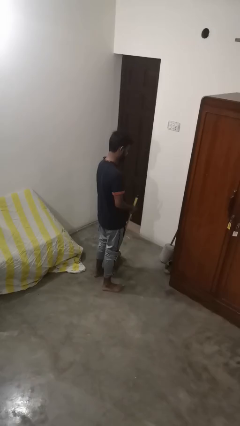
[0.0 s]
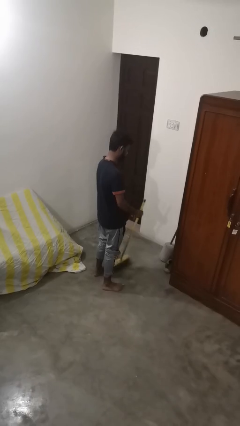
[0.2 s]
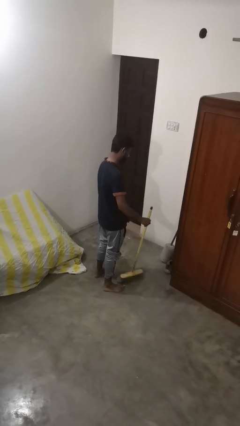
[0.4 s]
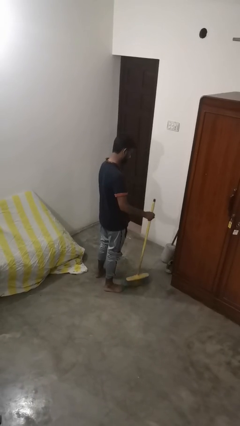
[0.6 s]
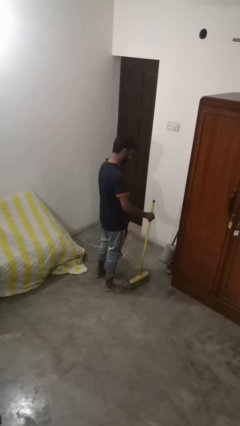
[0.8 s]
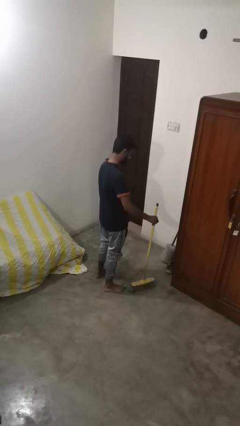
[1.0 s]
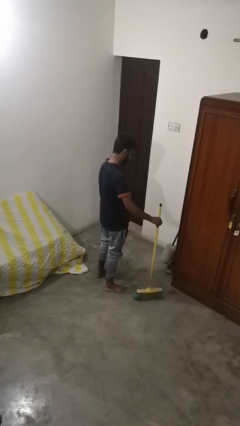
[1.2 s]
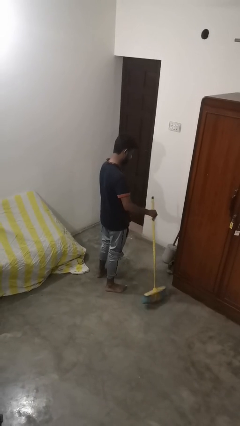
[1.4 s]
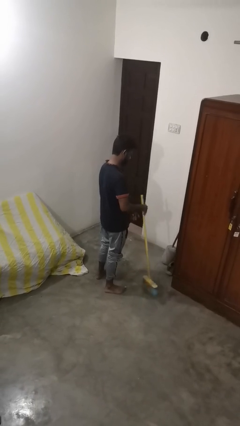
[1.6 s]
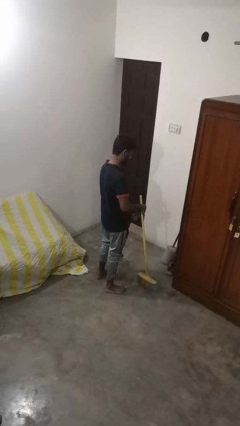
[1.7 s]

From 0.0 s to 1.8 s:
person sweeps floor

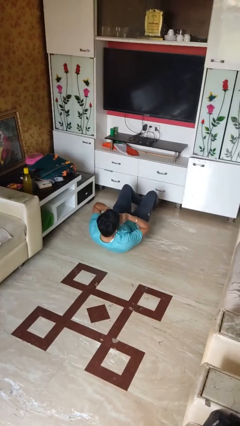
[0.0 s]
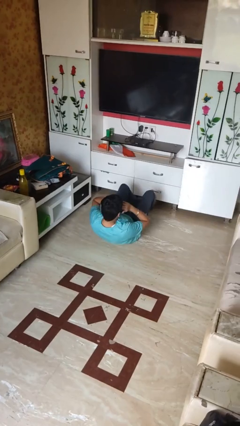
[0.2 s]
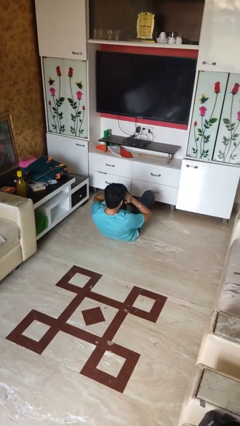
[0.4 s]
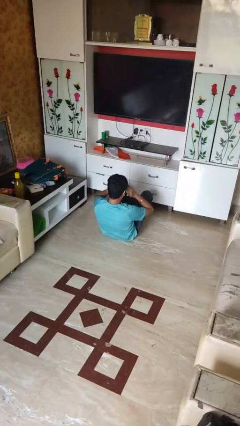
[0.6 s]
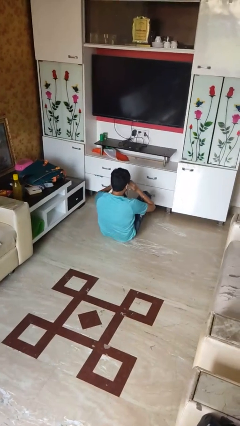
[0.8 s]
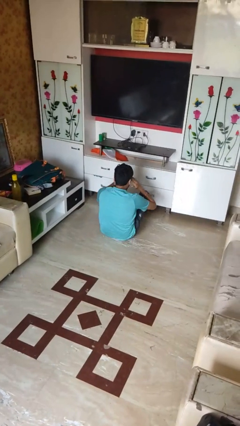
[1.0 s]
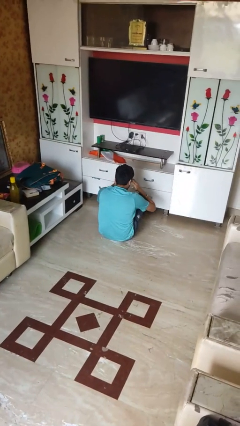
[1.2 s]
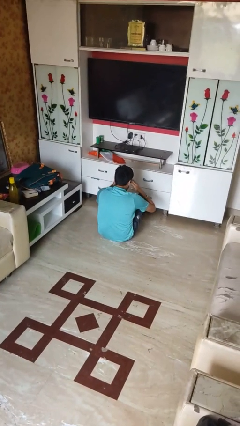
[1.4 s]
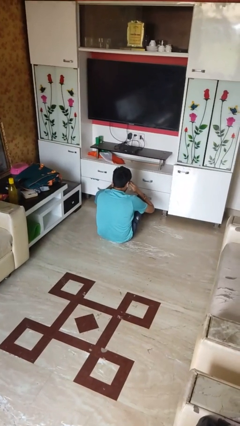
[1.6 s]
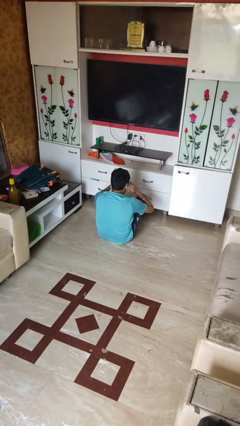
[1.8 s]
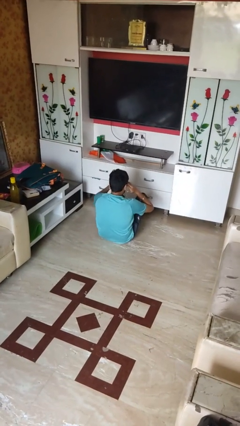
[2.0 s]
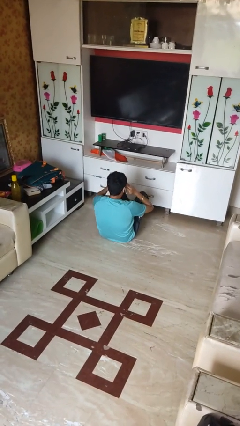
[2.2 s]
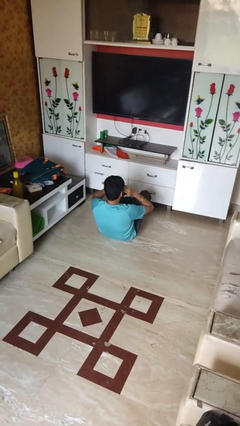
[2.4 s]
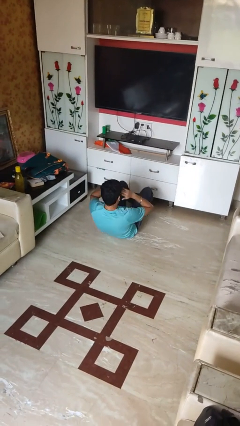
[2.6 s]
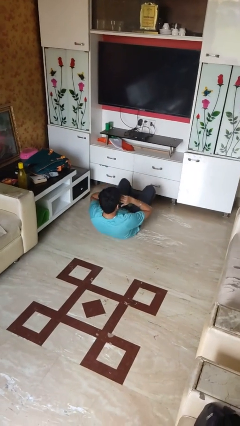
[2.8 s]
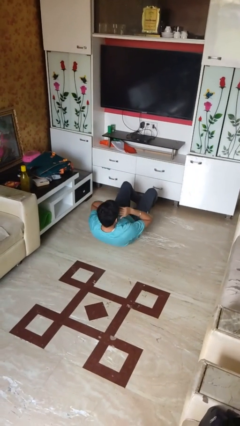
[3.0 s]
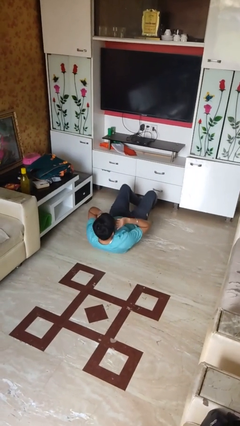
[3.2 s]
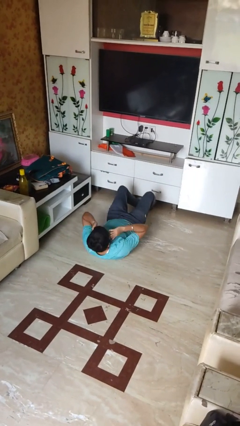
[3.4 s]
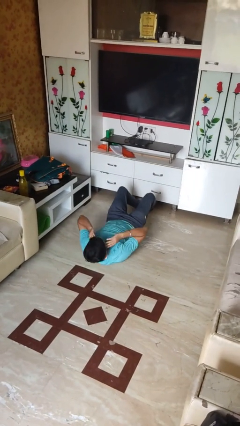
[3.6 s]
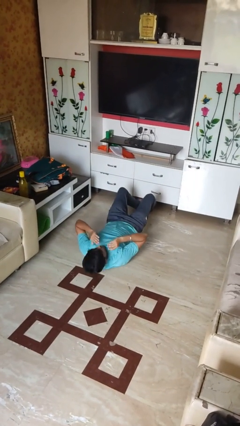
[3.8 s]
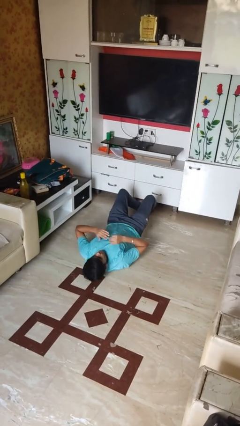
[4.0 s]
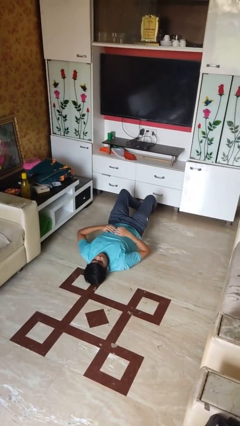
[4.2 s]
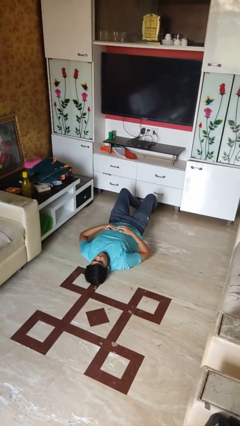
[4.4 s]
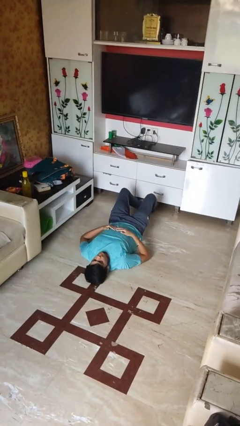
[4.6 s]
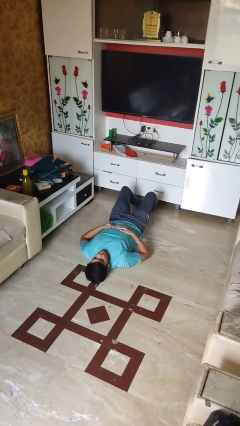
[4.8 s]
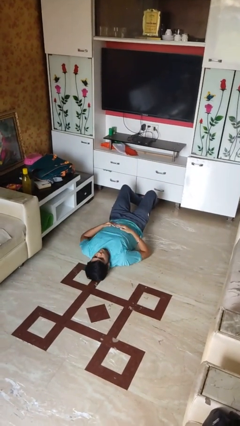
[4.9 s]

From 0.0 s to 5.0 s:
person exercises with situp

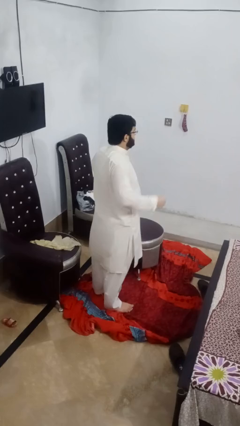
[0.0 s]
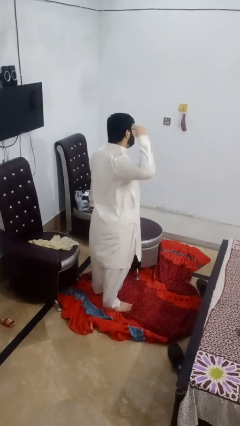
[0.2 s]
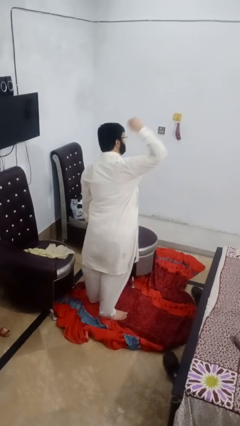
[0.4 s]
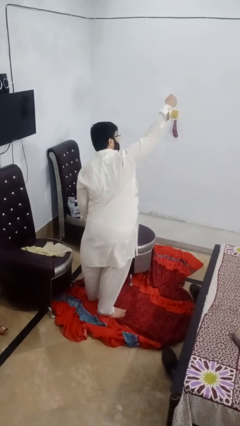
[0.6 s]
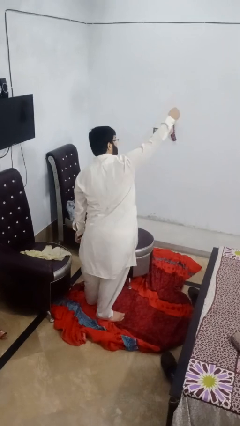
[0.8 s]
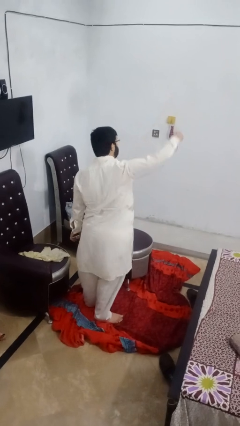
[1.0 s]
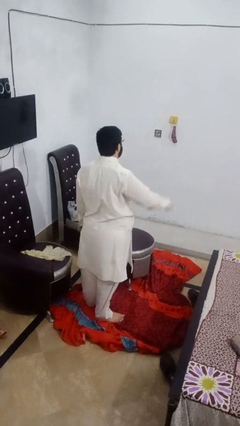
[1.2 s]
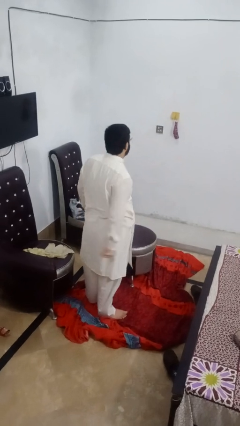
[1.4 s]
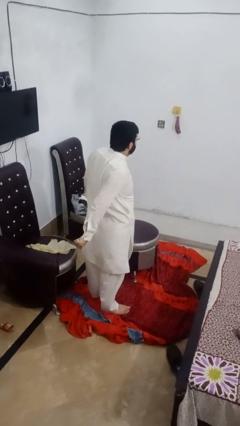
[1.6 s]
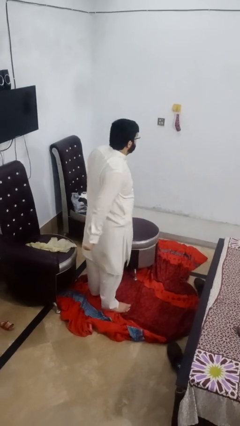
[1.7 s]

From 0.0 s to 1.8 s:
person punches

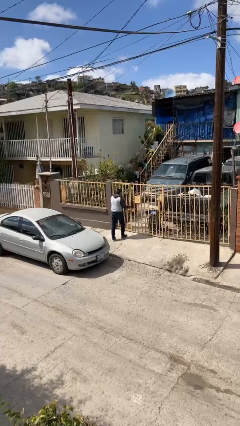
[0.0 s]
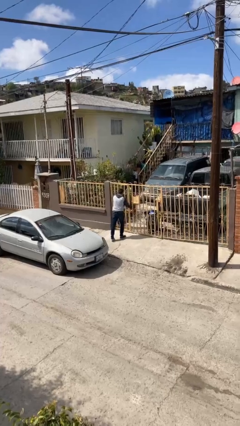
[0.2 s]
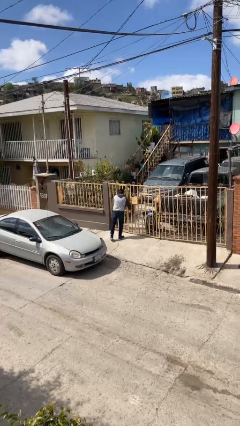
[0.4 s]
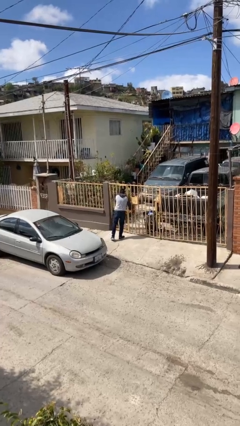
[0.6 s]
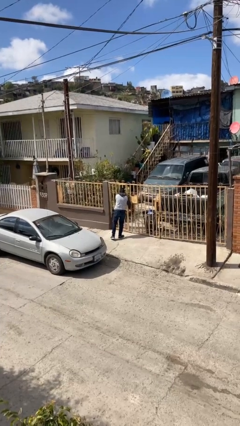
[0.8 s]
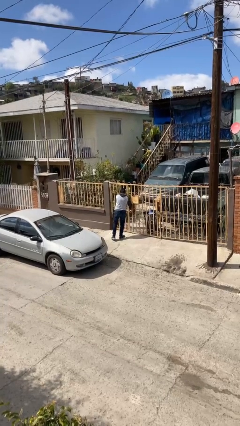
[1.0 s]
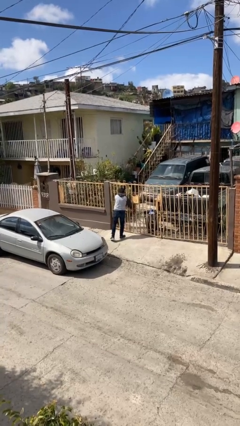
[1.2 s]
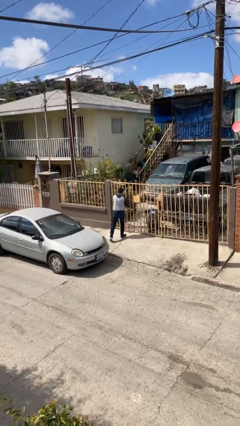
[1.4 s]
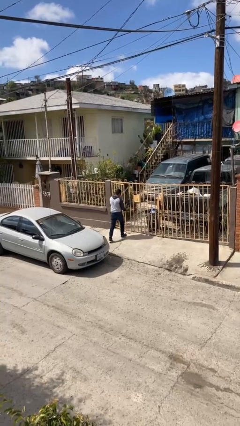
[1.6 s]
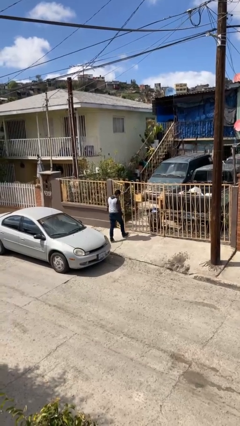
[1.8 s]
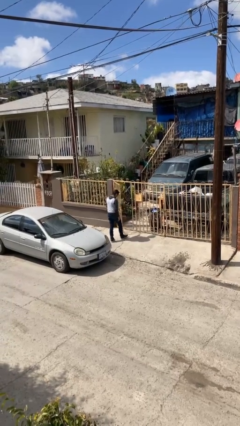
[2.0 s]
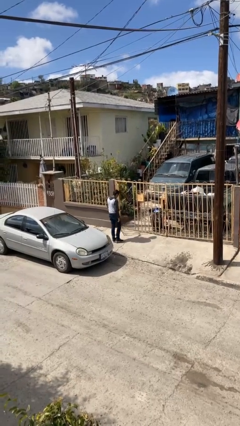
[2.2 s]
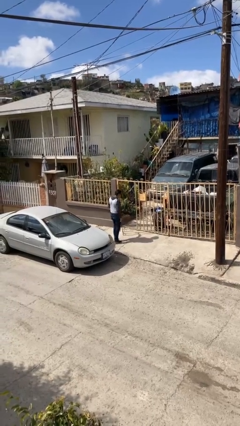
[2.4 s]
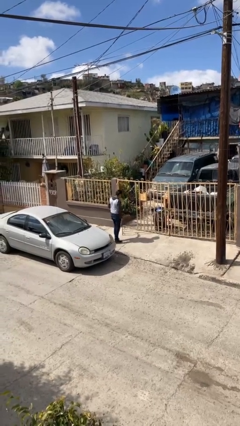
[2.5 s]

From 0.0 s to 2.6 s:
person opens facility door

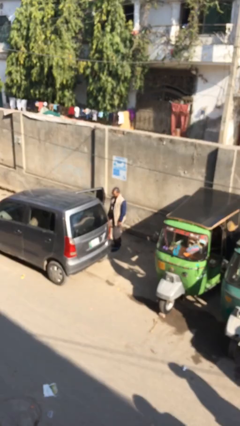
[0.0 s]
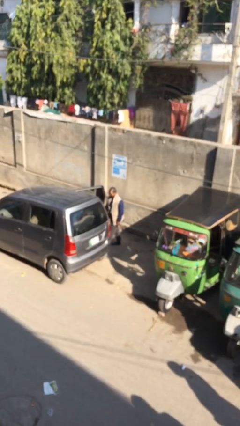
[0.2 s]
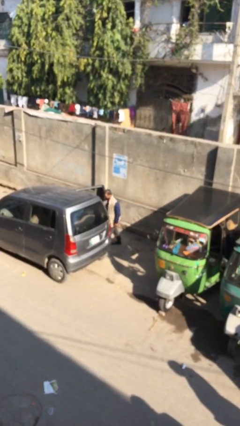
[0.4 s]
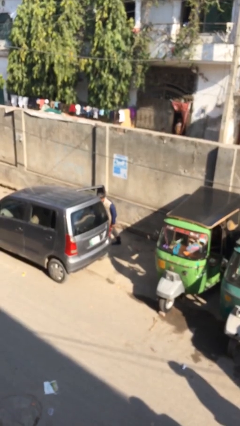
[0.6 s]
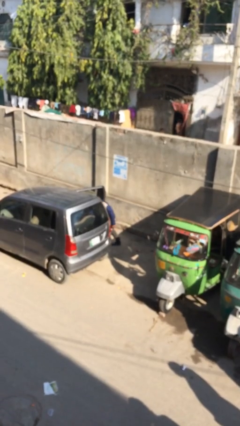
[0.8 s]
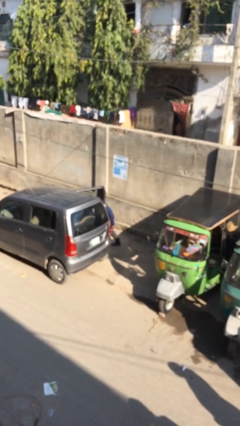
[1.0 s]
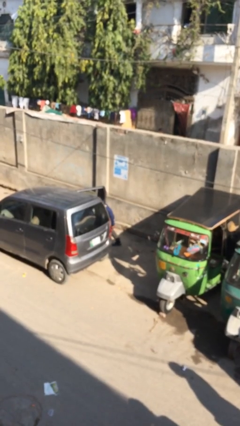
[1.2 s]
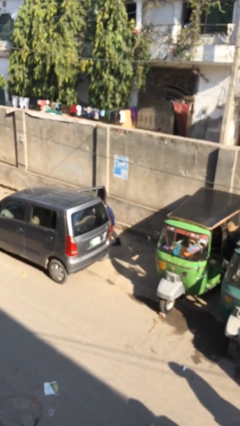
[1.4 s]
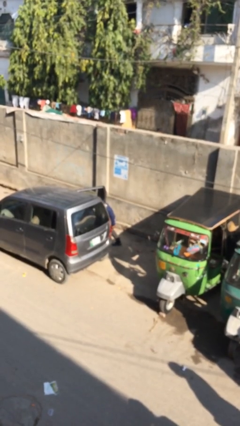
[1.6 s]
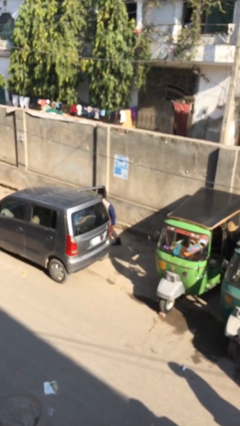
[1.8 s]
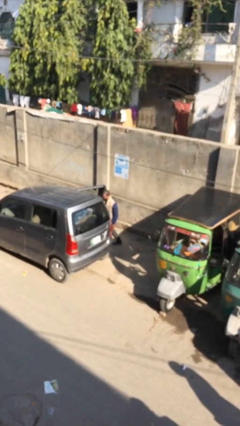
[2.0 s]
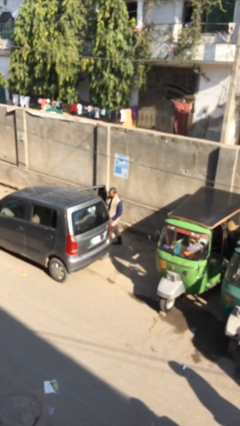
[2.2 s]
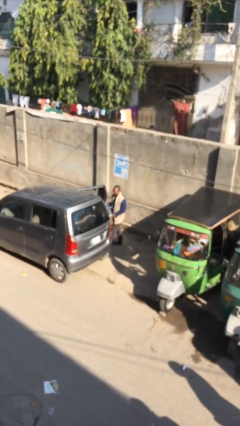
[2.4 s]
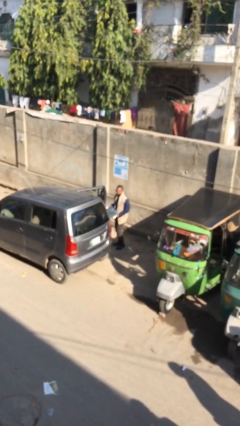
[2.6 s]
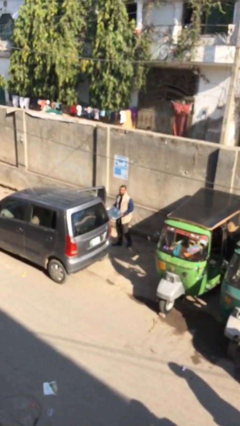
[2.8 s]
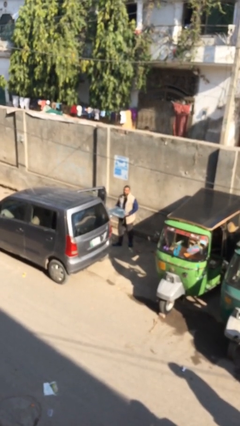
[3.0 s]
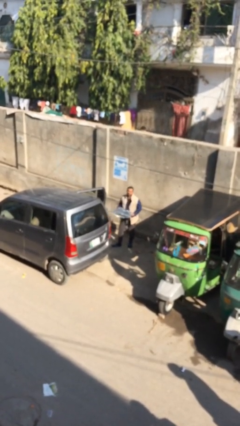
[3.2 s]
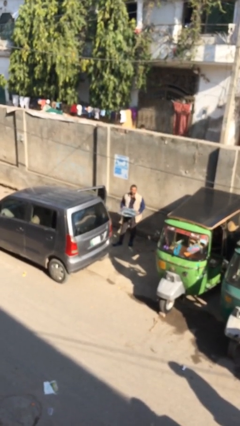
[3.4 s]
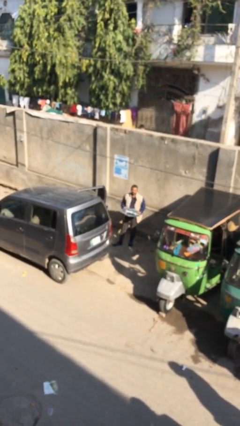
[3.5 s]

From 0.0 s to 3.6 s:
person unloads car

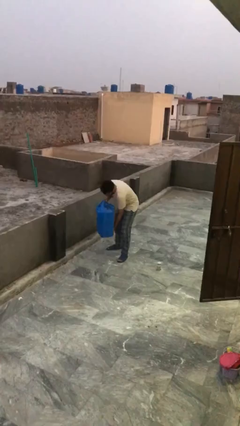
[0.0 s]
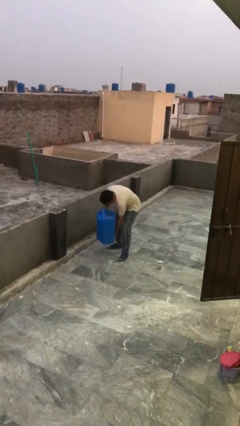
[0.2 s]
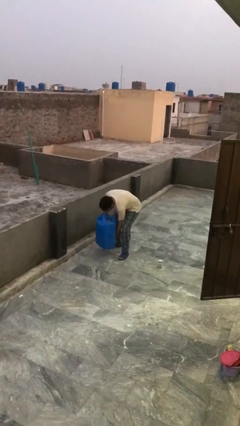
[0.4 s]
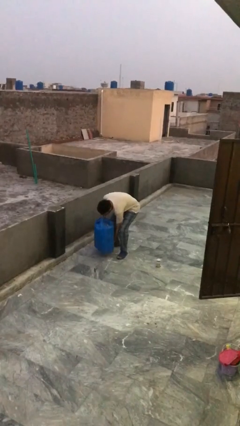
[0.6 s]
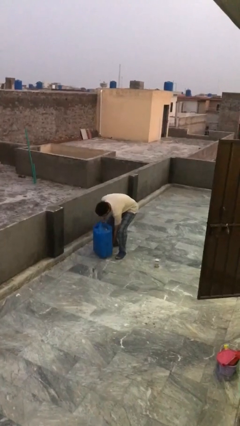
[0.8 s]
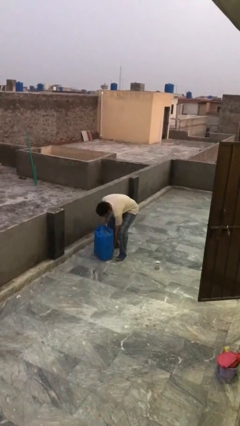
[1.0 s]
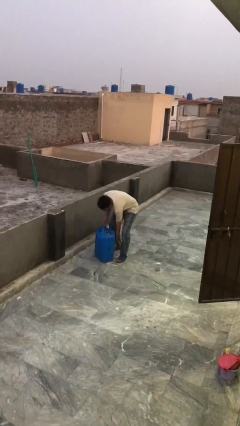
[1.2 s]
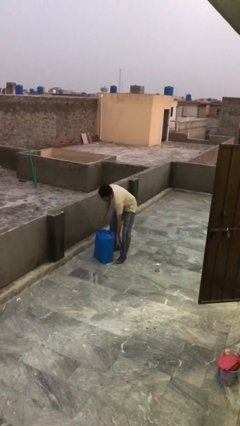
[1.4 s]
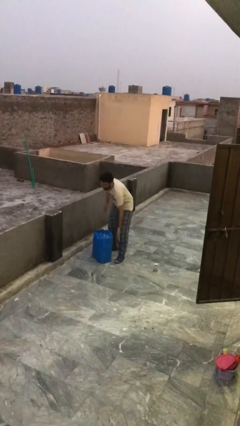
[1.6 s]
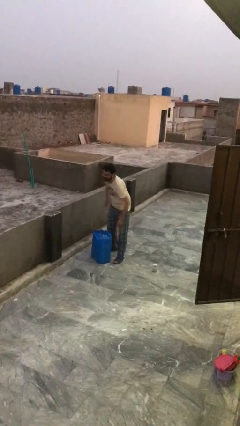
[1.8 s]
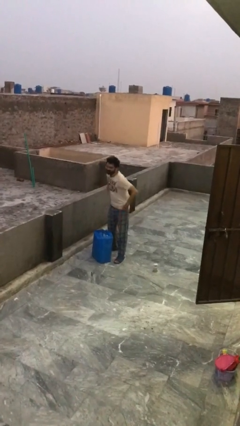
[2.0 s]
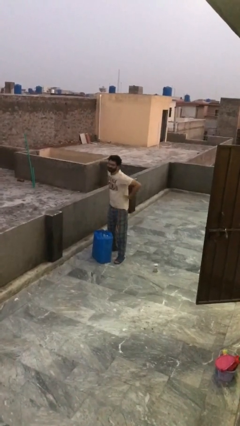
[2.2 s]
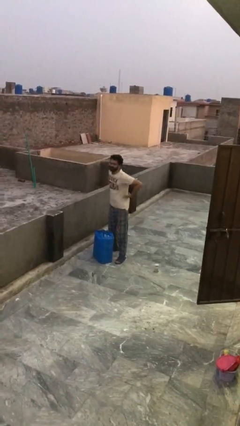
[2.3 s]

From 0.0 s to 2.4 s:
person puts down object on floor

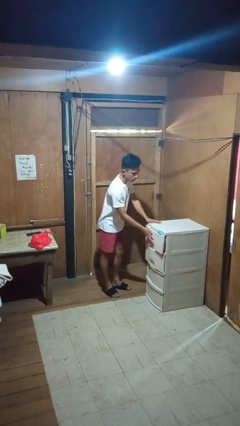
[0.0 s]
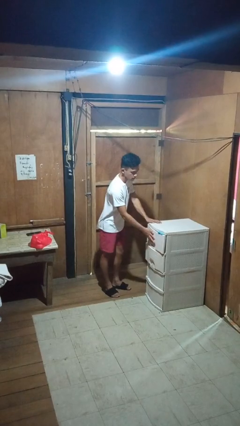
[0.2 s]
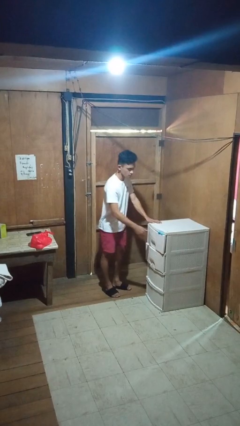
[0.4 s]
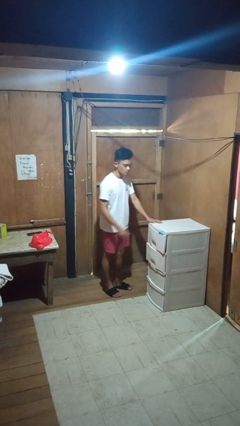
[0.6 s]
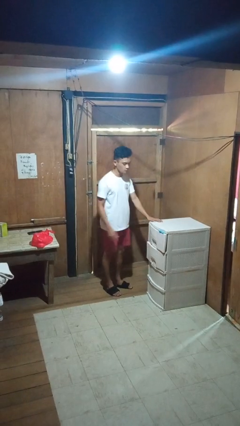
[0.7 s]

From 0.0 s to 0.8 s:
person closes dresser drawer
